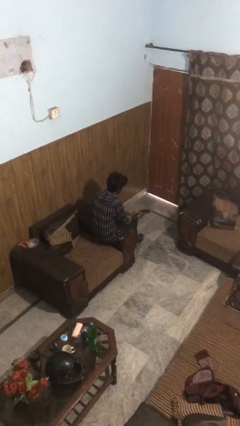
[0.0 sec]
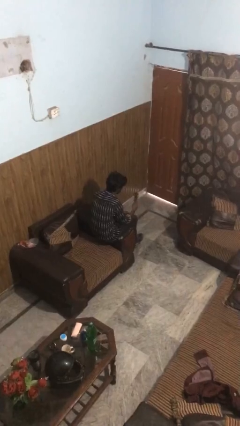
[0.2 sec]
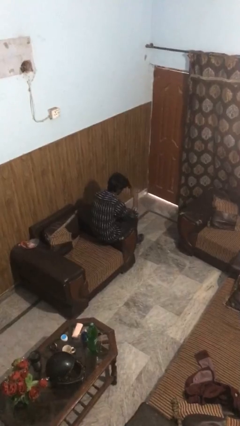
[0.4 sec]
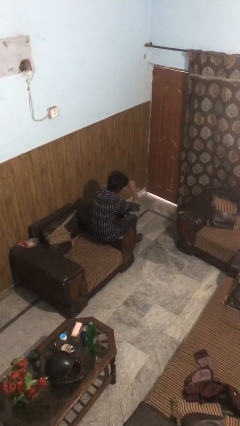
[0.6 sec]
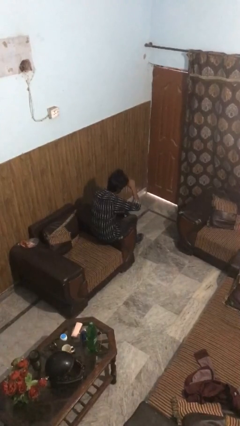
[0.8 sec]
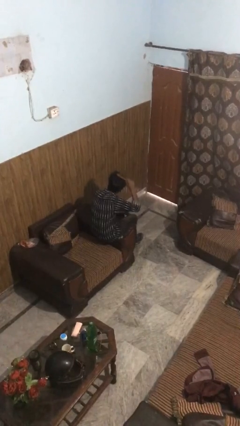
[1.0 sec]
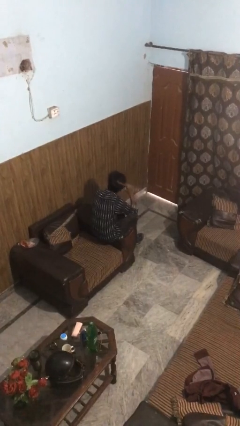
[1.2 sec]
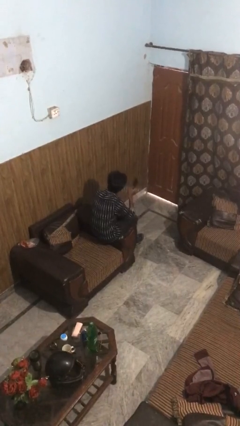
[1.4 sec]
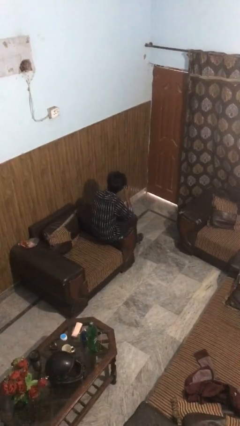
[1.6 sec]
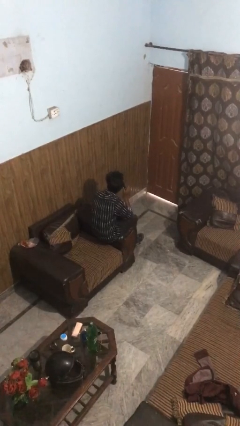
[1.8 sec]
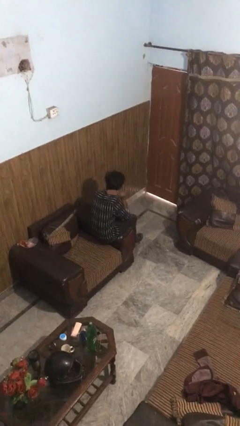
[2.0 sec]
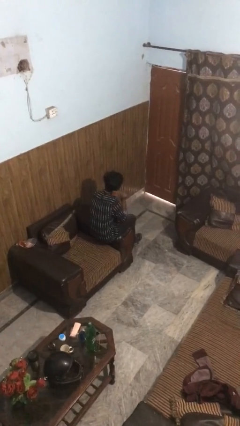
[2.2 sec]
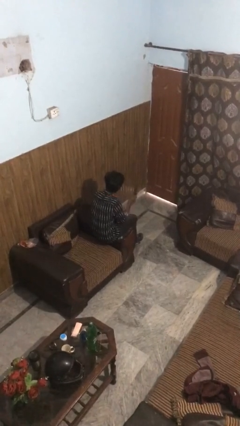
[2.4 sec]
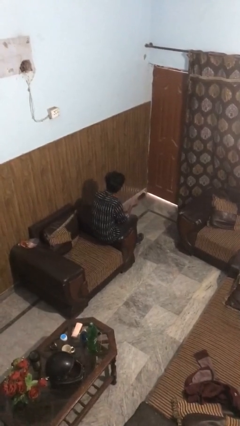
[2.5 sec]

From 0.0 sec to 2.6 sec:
person brushes hair

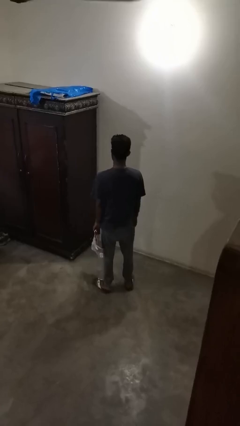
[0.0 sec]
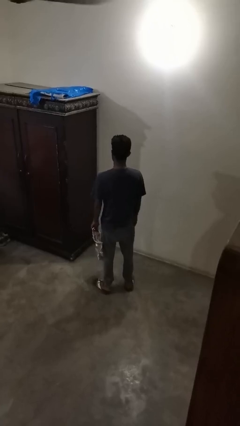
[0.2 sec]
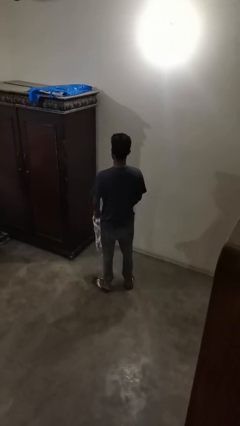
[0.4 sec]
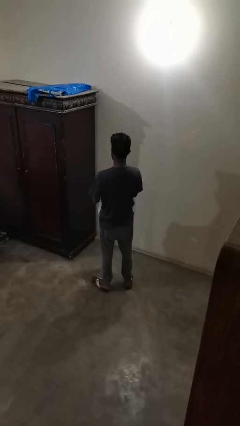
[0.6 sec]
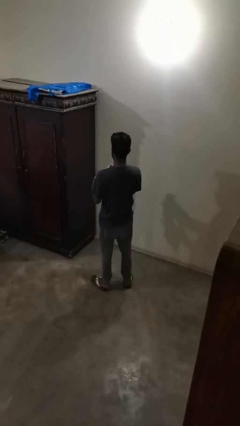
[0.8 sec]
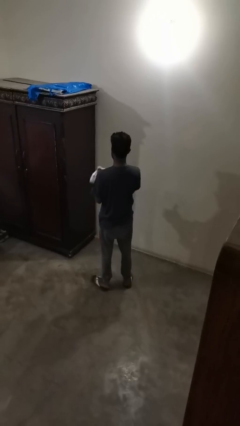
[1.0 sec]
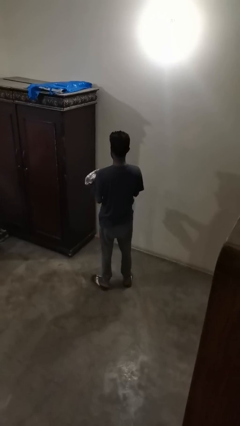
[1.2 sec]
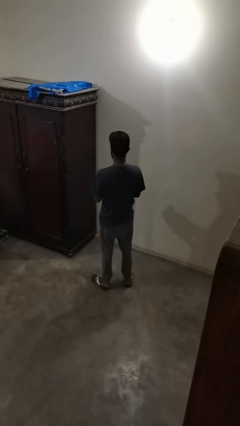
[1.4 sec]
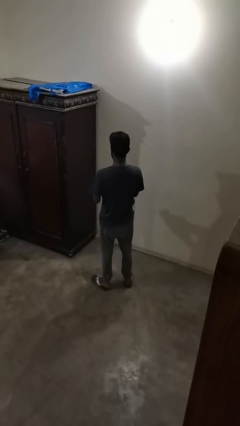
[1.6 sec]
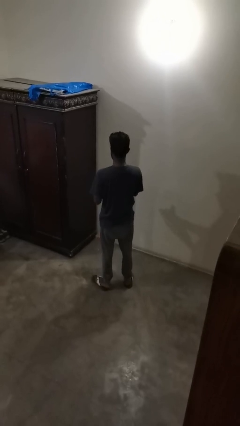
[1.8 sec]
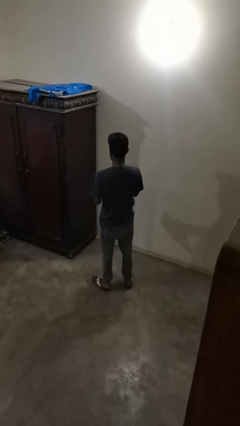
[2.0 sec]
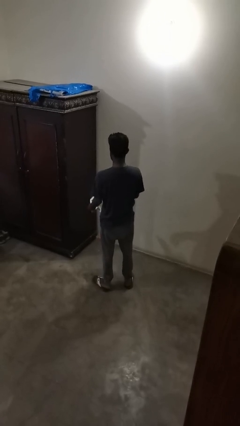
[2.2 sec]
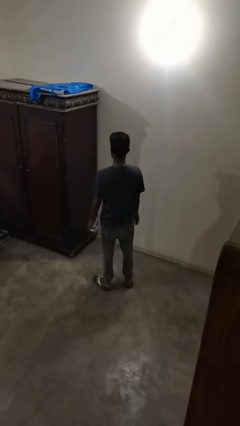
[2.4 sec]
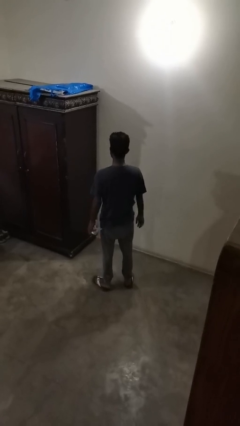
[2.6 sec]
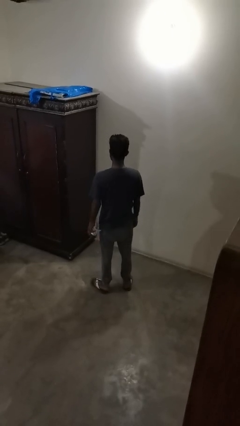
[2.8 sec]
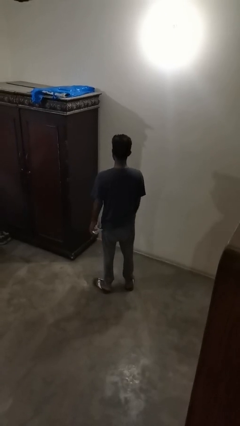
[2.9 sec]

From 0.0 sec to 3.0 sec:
person crumples paper

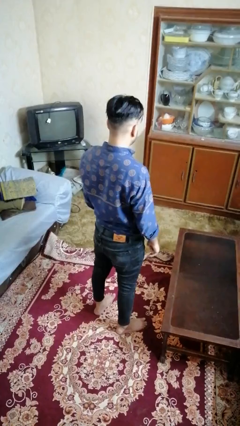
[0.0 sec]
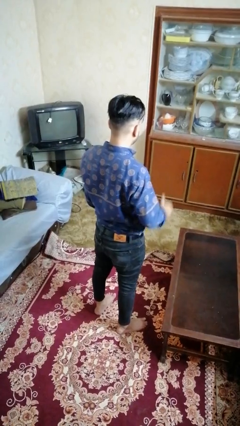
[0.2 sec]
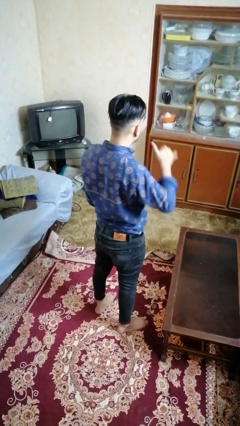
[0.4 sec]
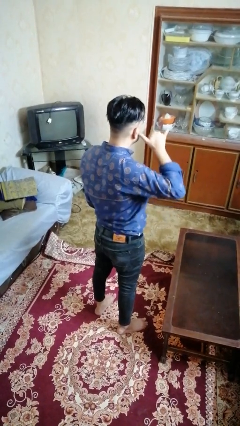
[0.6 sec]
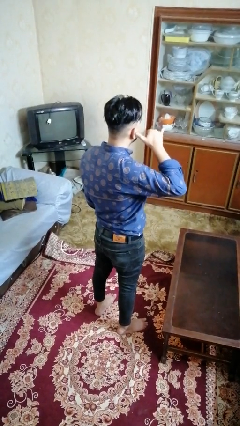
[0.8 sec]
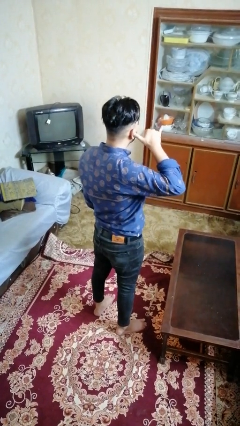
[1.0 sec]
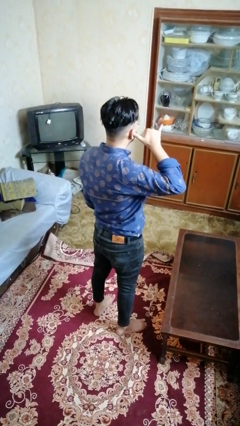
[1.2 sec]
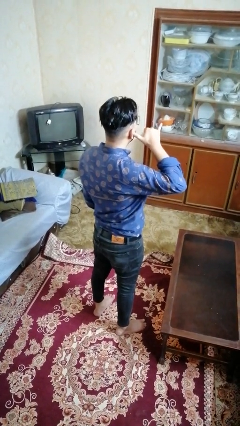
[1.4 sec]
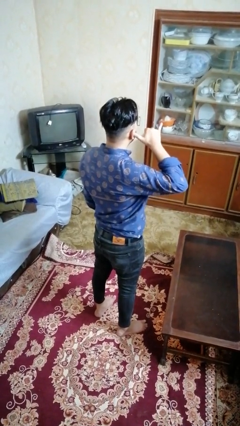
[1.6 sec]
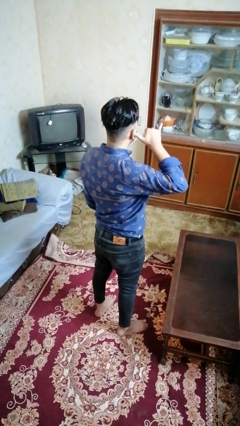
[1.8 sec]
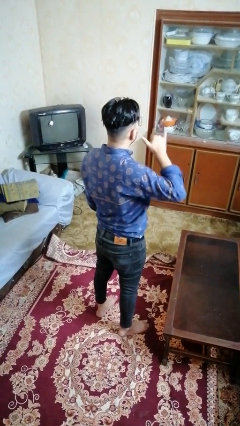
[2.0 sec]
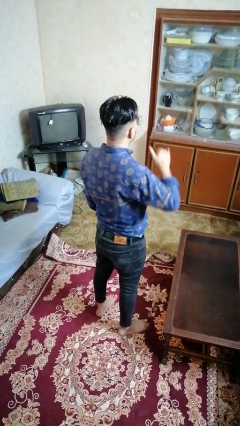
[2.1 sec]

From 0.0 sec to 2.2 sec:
person gestures call me

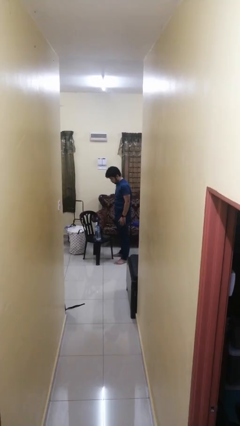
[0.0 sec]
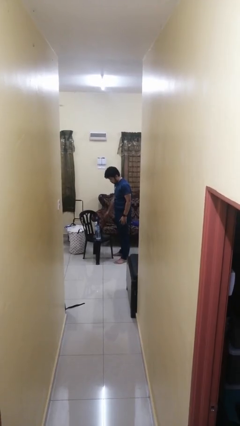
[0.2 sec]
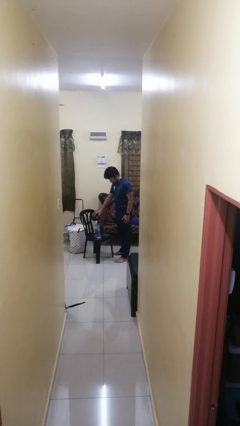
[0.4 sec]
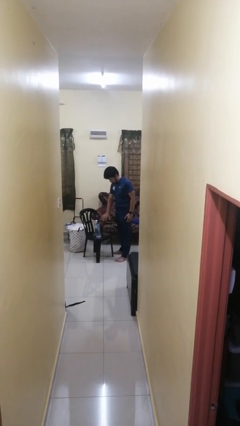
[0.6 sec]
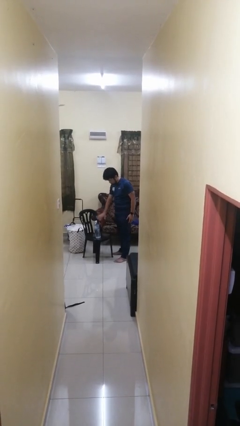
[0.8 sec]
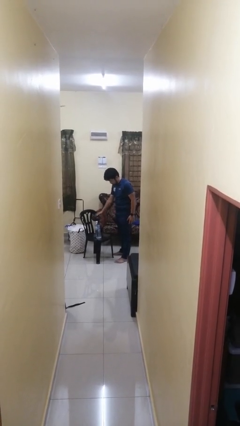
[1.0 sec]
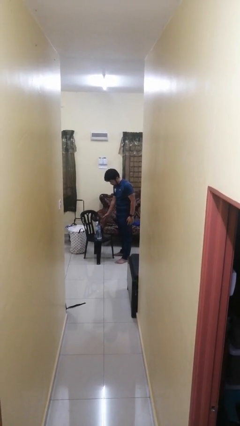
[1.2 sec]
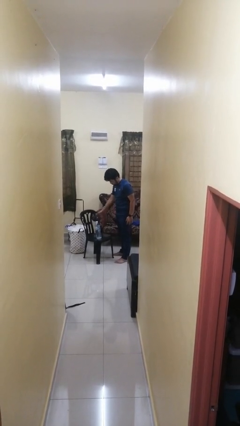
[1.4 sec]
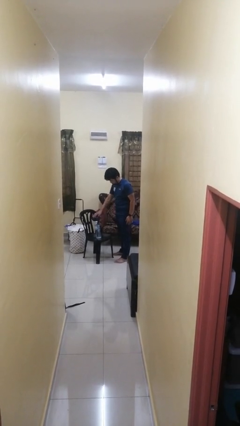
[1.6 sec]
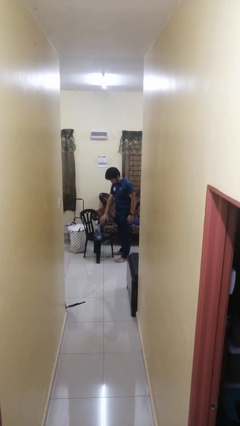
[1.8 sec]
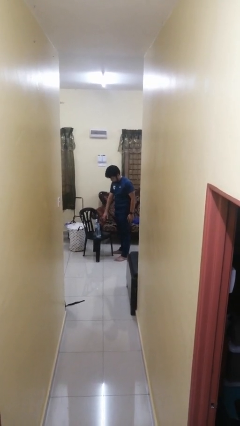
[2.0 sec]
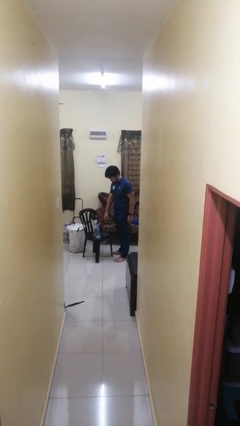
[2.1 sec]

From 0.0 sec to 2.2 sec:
person waves hand over object

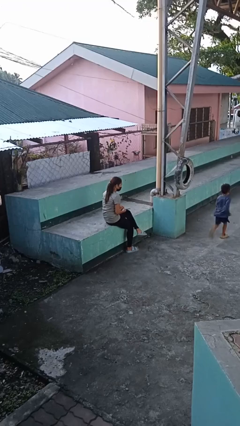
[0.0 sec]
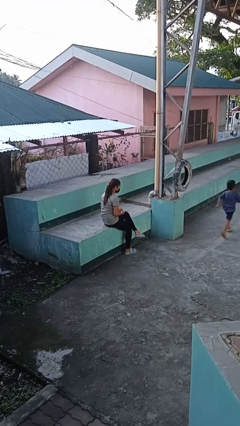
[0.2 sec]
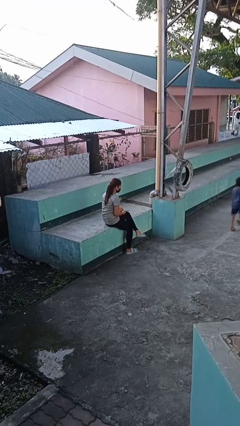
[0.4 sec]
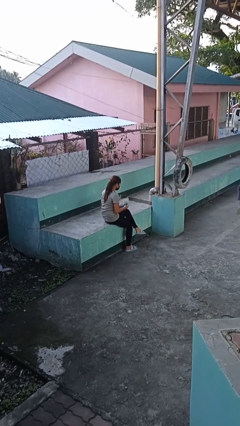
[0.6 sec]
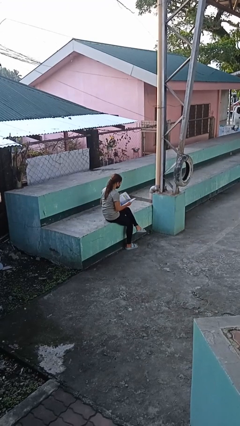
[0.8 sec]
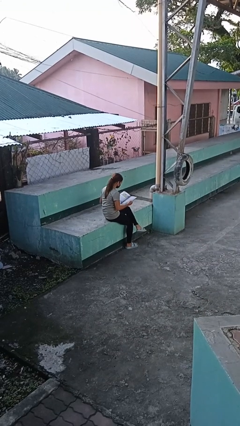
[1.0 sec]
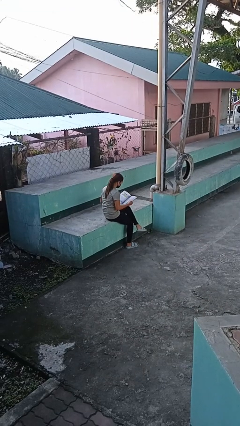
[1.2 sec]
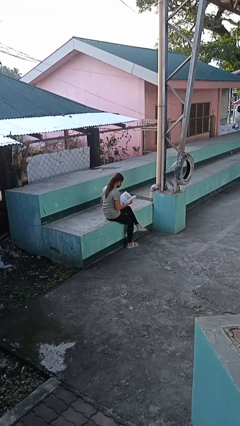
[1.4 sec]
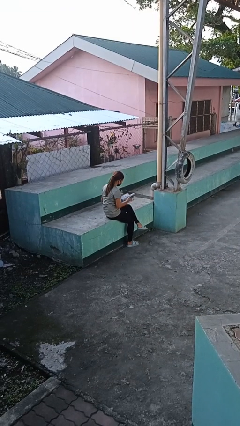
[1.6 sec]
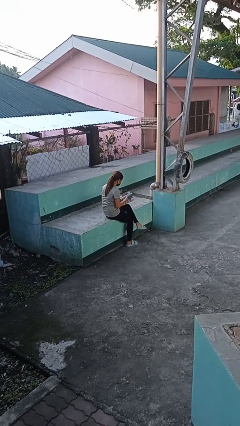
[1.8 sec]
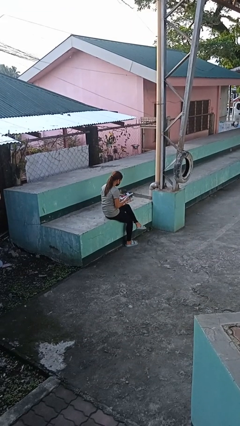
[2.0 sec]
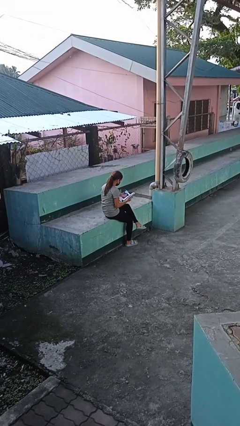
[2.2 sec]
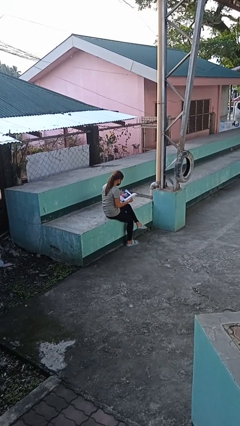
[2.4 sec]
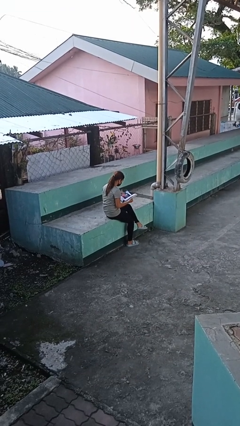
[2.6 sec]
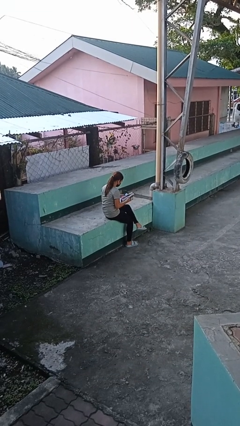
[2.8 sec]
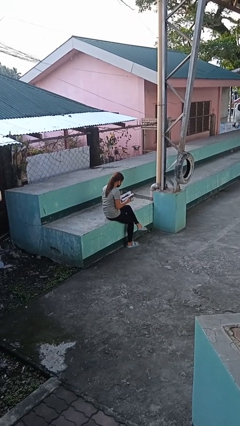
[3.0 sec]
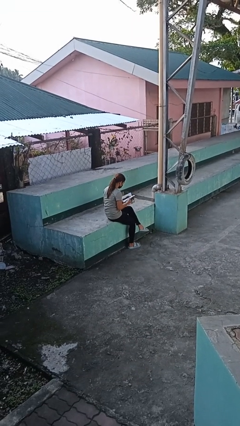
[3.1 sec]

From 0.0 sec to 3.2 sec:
person reads magazine

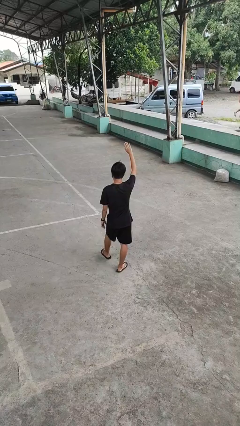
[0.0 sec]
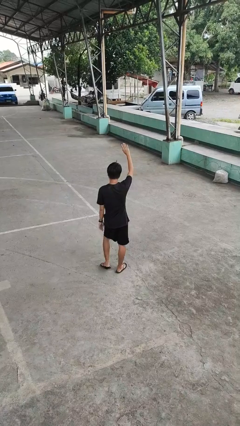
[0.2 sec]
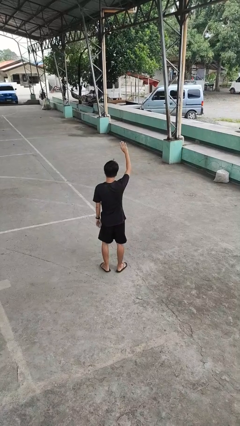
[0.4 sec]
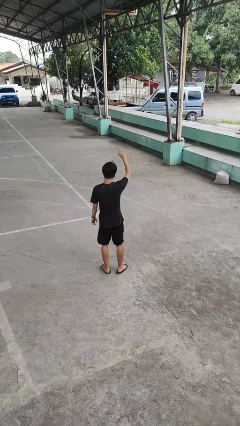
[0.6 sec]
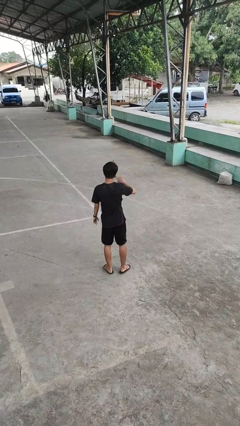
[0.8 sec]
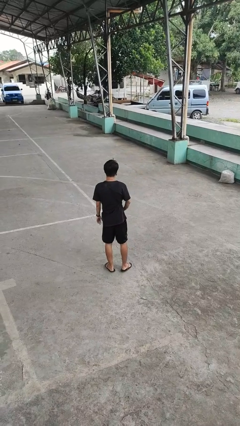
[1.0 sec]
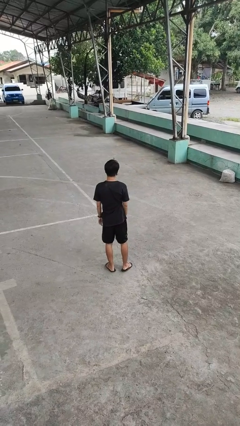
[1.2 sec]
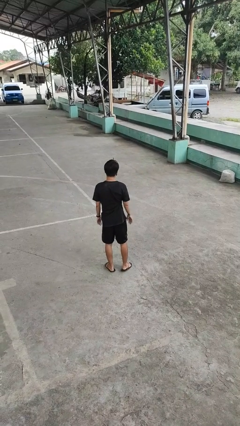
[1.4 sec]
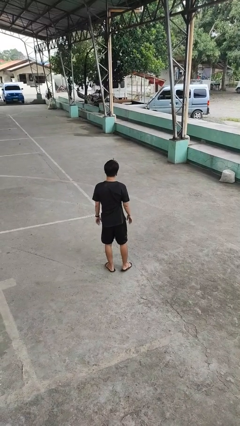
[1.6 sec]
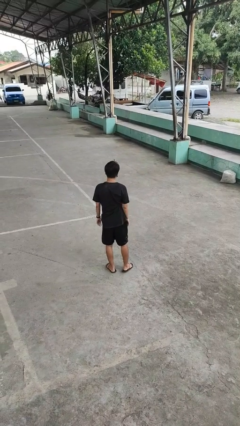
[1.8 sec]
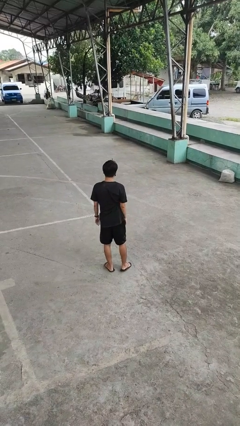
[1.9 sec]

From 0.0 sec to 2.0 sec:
person gestures swipe down

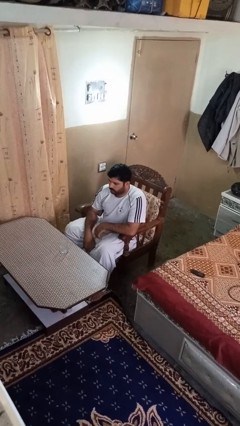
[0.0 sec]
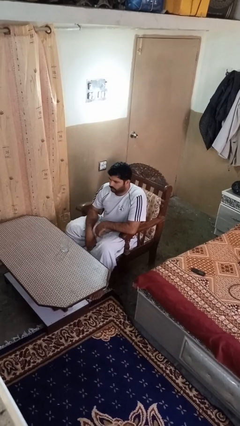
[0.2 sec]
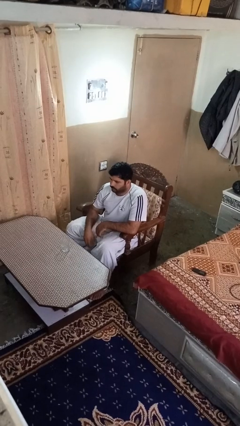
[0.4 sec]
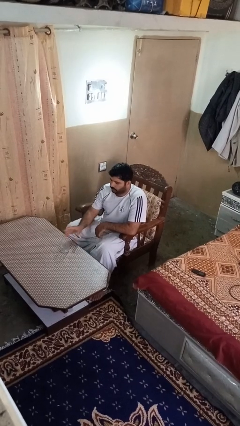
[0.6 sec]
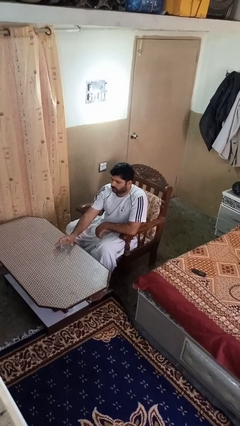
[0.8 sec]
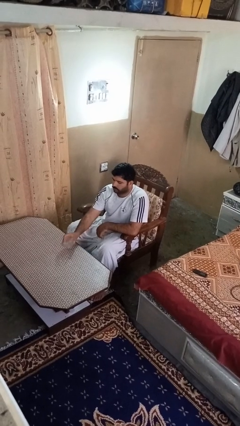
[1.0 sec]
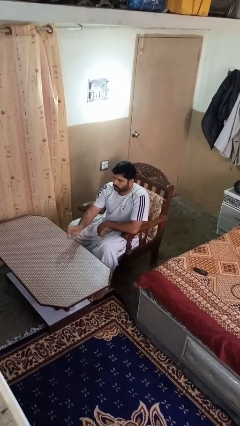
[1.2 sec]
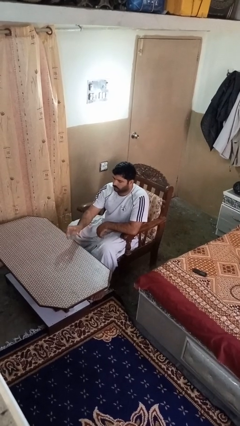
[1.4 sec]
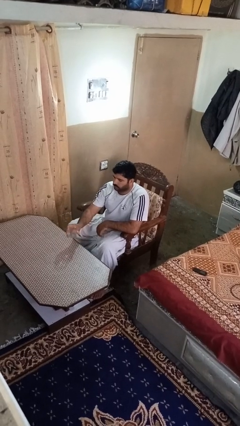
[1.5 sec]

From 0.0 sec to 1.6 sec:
person picks up object from table

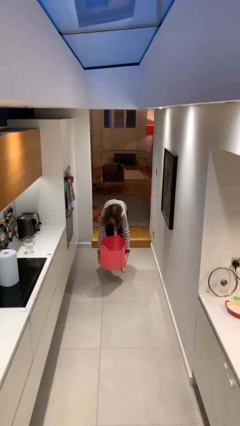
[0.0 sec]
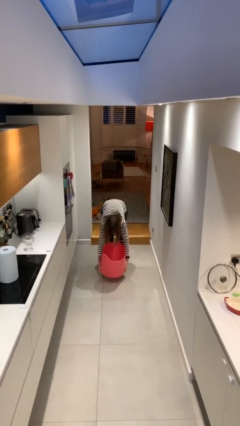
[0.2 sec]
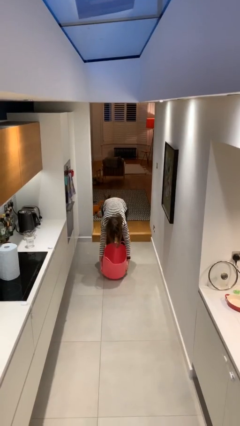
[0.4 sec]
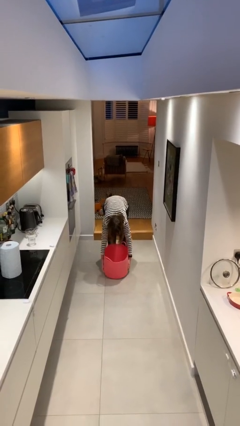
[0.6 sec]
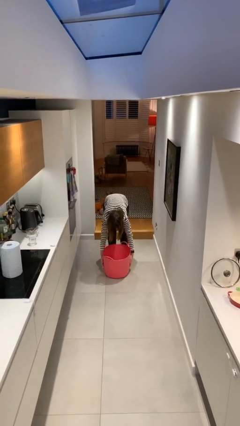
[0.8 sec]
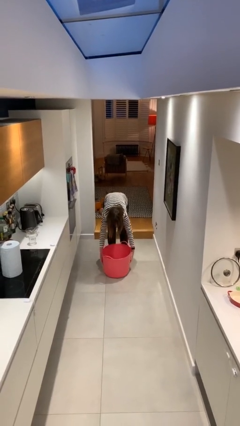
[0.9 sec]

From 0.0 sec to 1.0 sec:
person puts down object on floor
